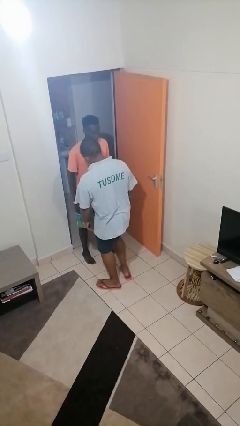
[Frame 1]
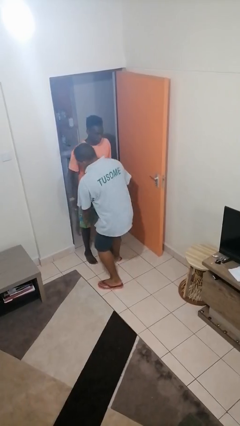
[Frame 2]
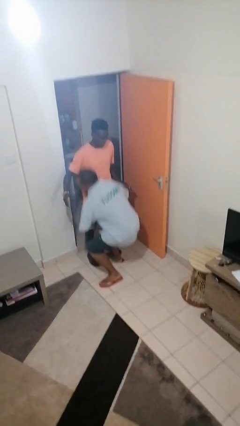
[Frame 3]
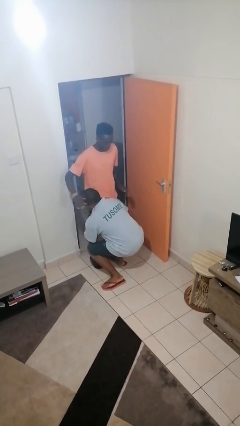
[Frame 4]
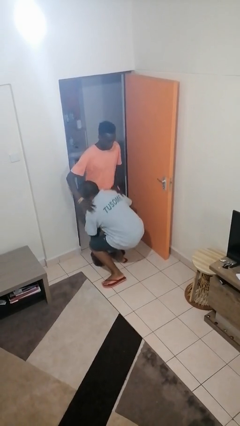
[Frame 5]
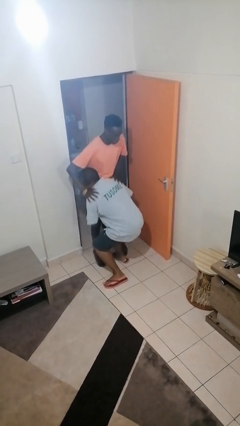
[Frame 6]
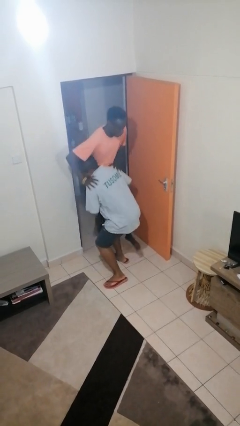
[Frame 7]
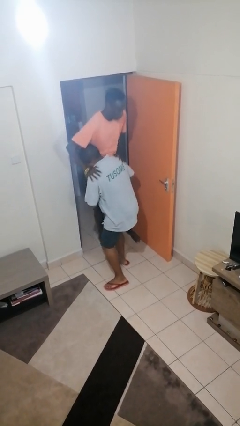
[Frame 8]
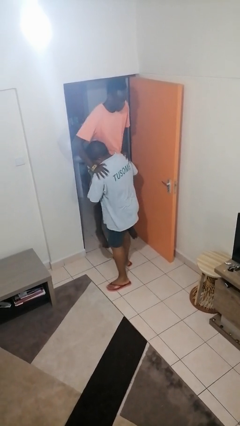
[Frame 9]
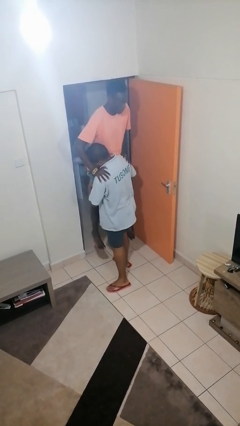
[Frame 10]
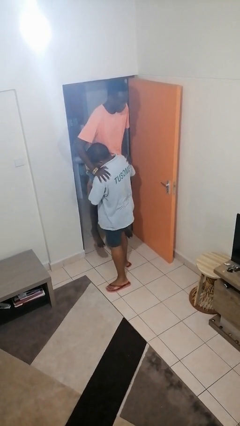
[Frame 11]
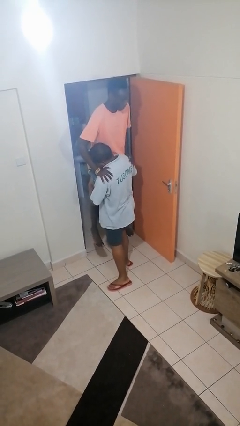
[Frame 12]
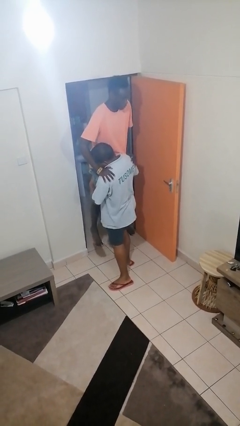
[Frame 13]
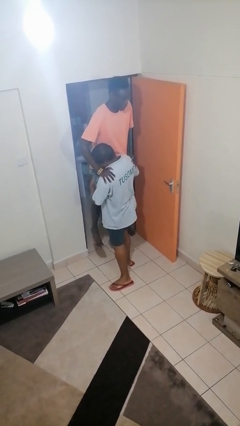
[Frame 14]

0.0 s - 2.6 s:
person carries person over shoulder

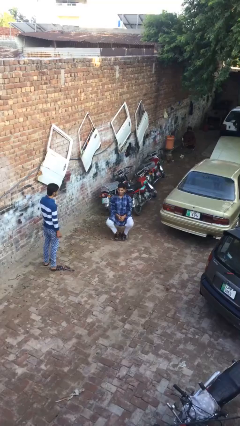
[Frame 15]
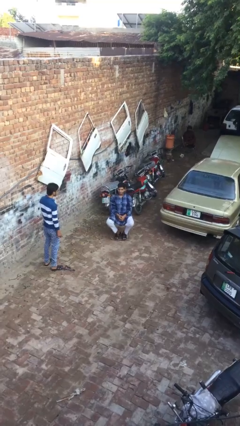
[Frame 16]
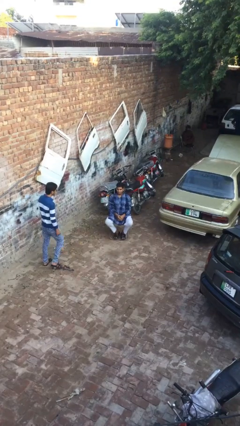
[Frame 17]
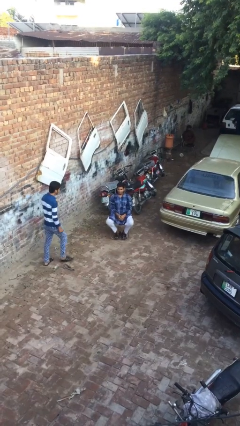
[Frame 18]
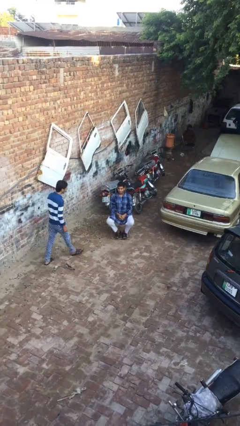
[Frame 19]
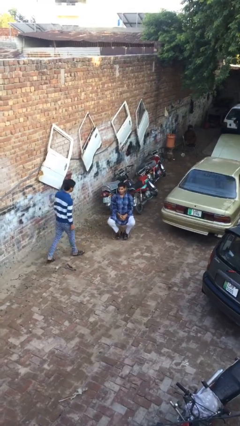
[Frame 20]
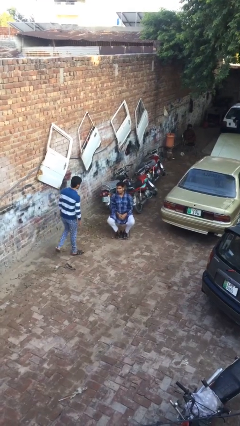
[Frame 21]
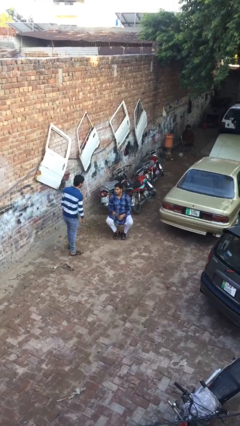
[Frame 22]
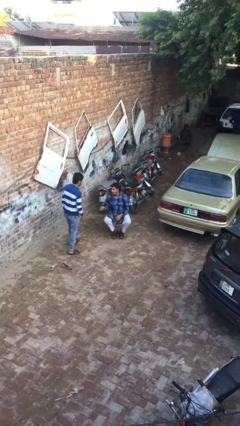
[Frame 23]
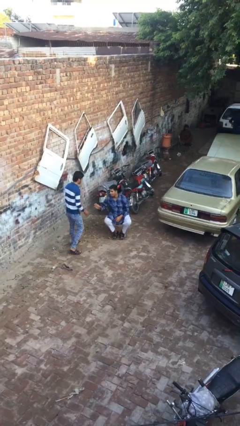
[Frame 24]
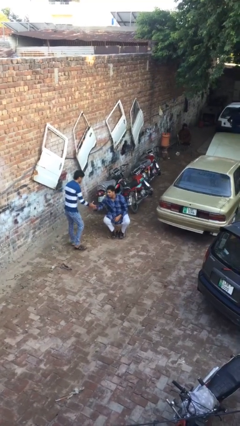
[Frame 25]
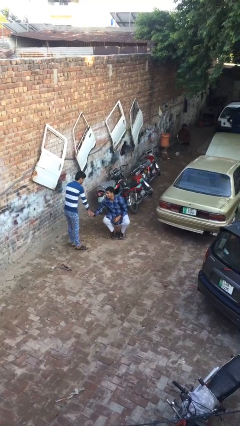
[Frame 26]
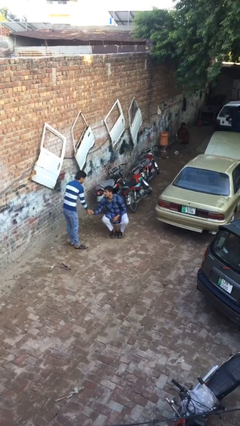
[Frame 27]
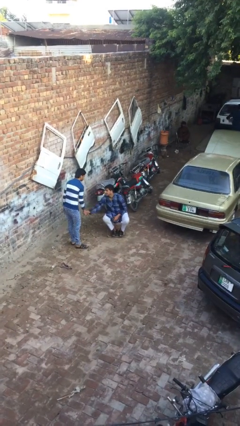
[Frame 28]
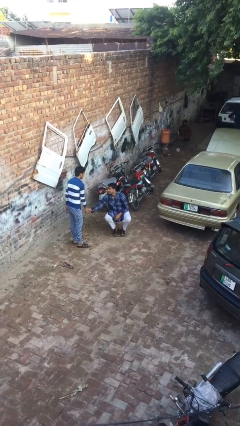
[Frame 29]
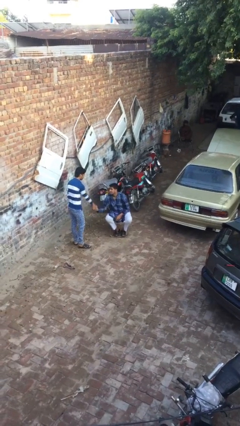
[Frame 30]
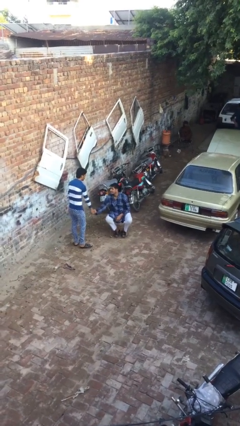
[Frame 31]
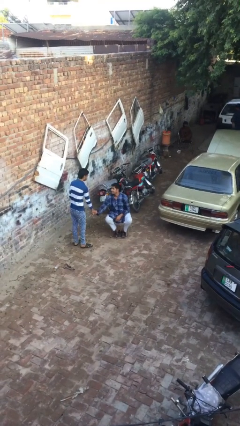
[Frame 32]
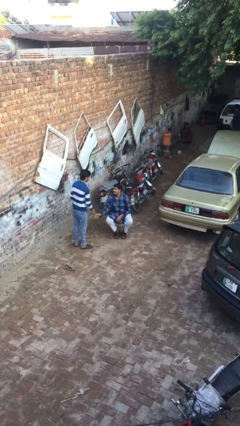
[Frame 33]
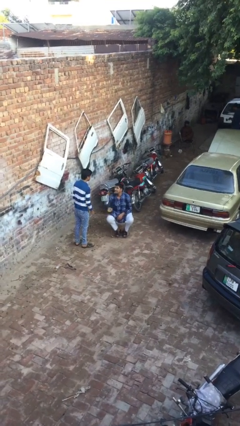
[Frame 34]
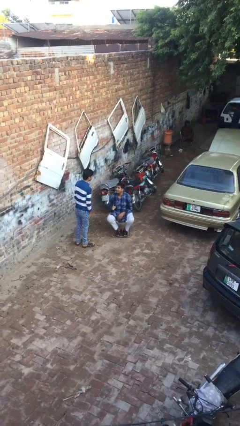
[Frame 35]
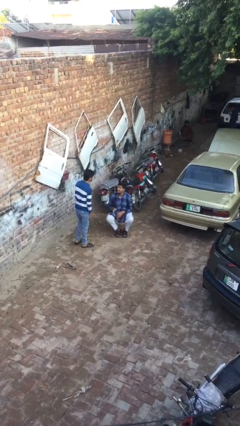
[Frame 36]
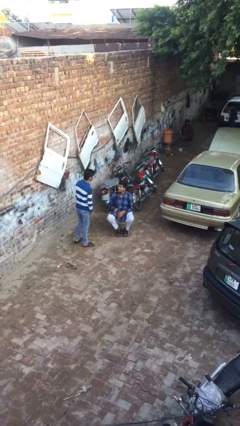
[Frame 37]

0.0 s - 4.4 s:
person shakes hand

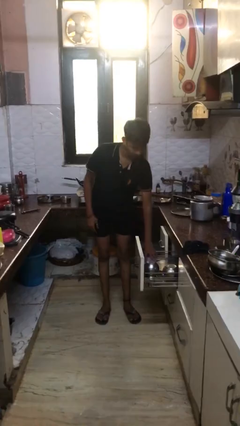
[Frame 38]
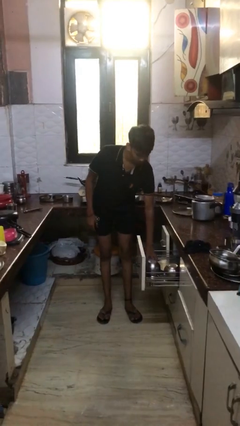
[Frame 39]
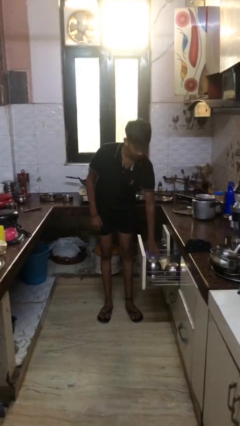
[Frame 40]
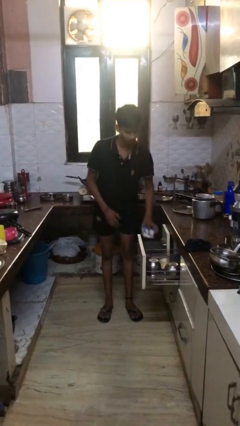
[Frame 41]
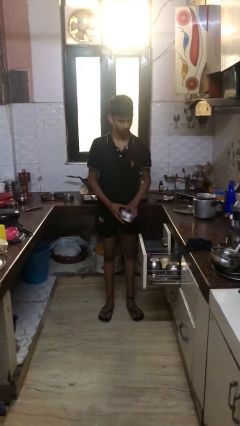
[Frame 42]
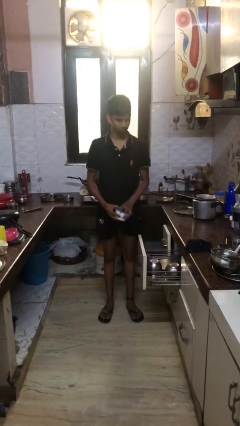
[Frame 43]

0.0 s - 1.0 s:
person takes object from kitchen drawer

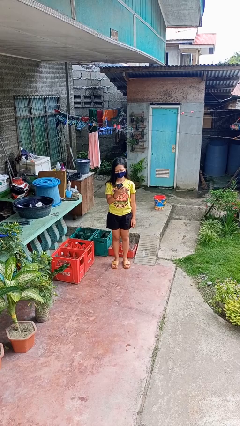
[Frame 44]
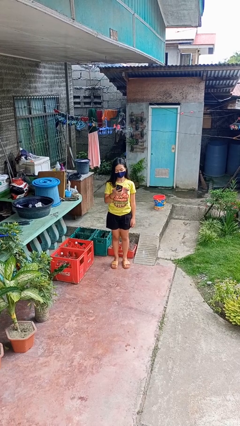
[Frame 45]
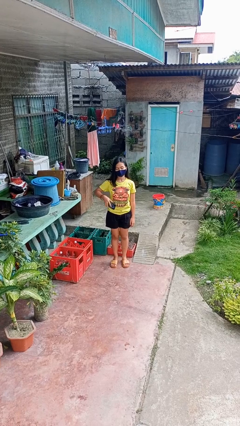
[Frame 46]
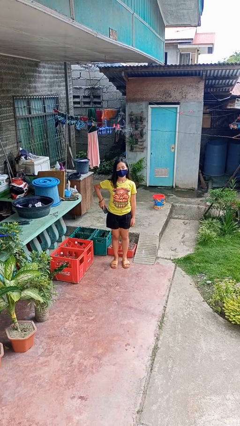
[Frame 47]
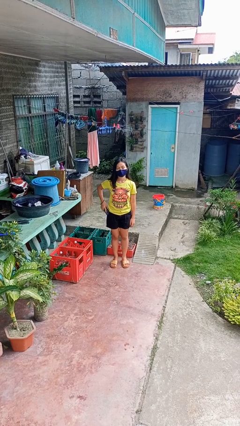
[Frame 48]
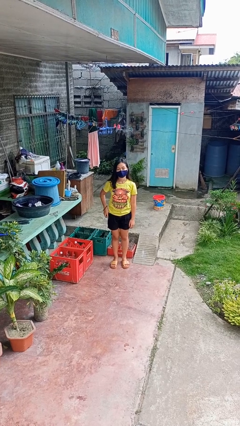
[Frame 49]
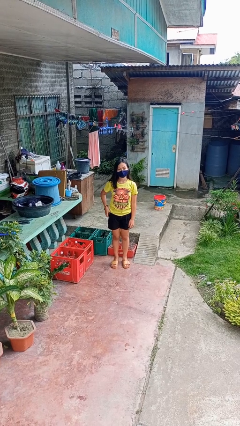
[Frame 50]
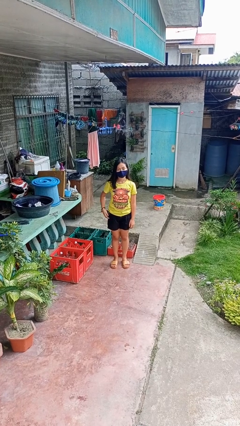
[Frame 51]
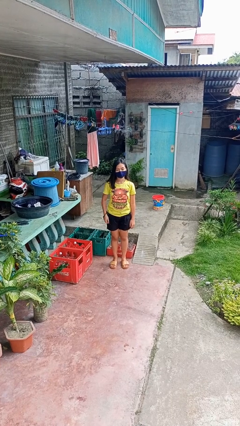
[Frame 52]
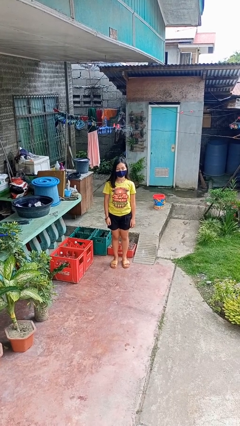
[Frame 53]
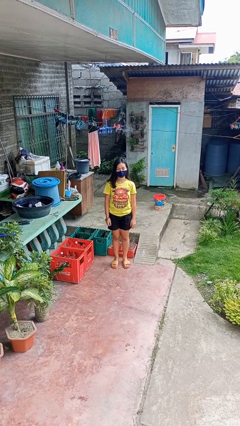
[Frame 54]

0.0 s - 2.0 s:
person puts phone into pocket

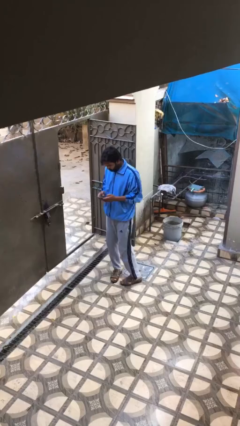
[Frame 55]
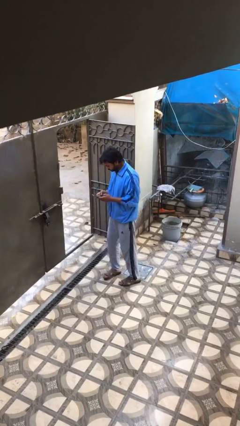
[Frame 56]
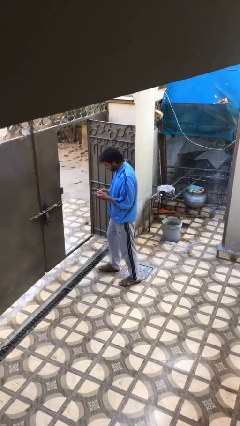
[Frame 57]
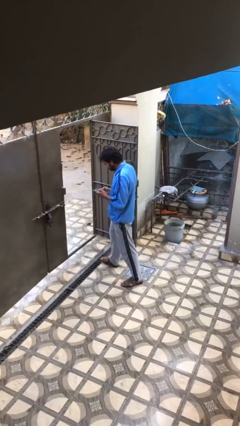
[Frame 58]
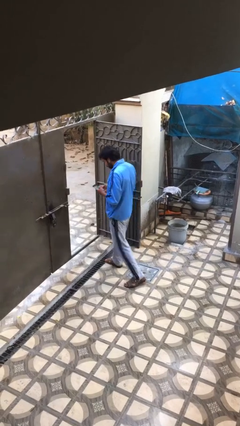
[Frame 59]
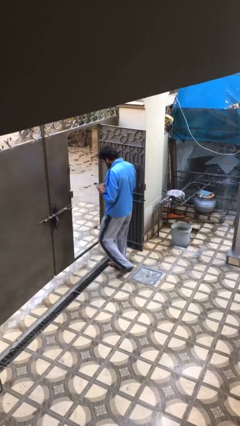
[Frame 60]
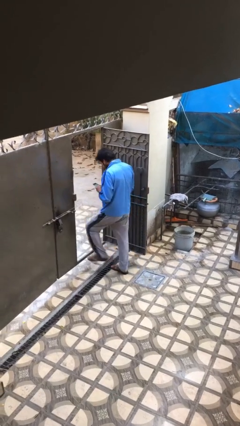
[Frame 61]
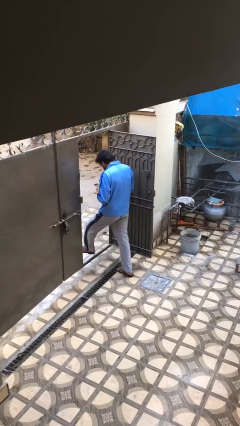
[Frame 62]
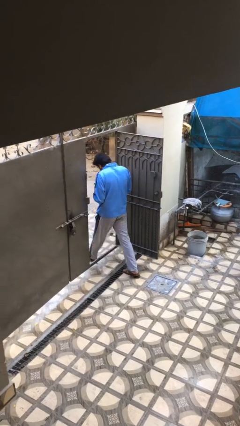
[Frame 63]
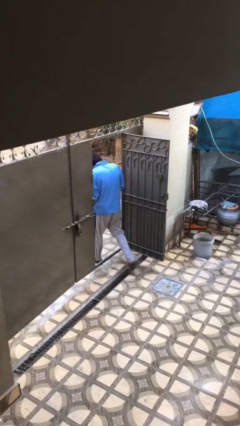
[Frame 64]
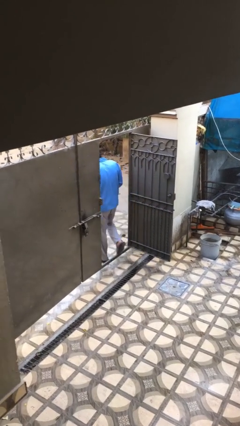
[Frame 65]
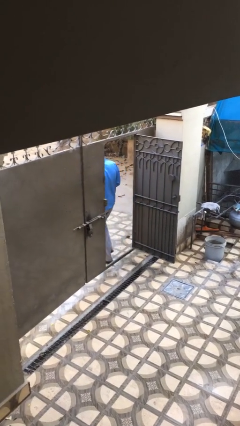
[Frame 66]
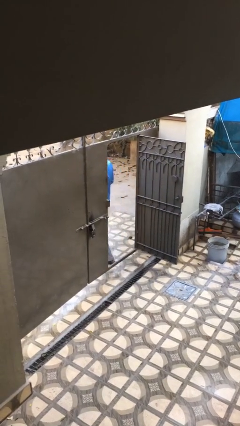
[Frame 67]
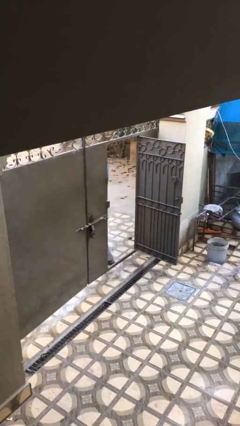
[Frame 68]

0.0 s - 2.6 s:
person exits scene through structure

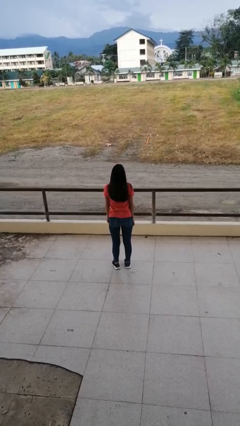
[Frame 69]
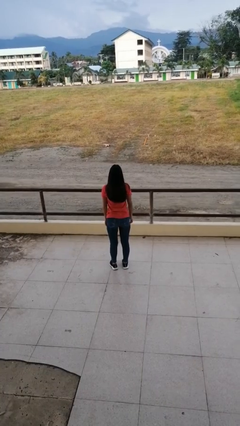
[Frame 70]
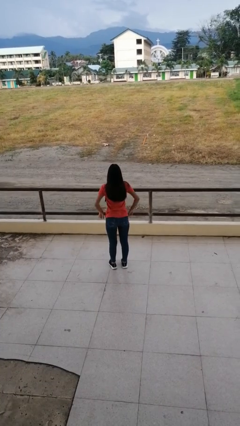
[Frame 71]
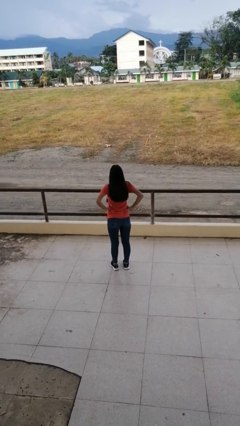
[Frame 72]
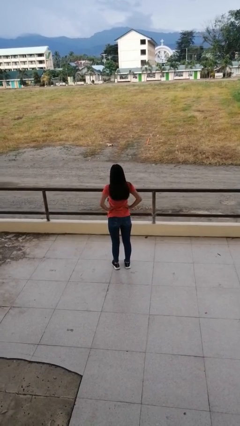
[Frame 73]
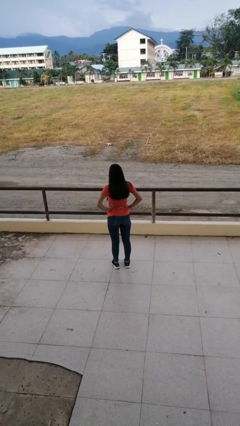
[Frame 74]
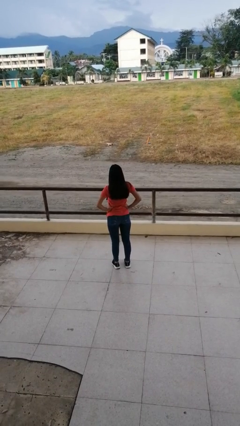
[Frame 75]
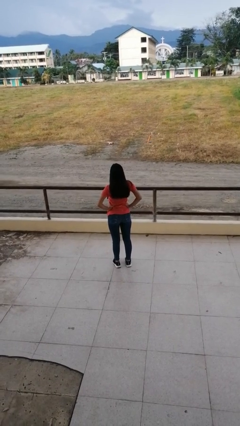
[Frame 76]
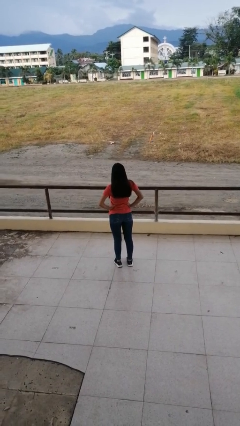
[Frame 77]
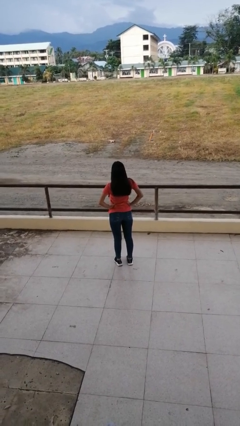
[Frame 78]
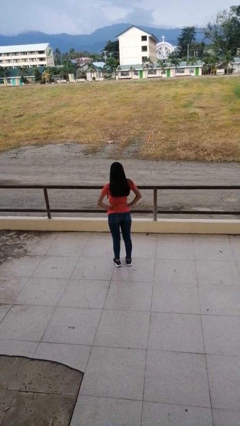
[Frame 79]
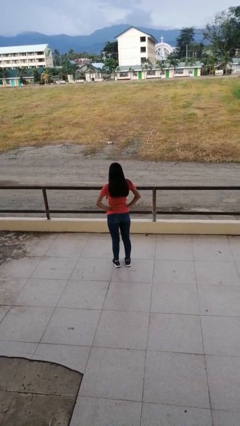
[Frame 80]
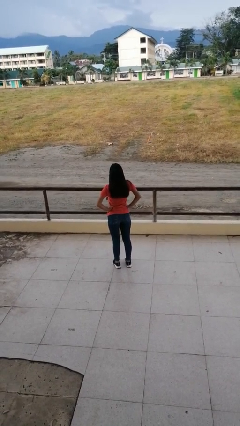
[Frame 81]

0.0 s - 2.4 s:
person stretches back

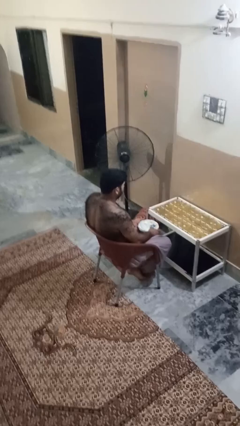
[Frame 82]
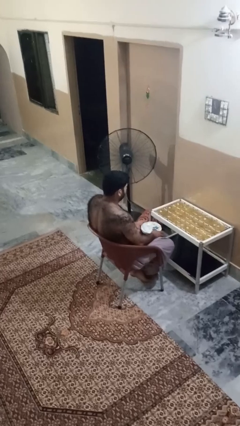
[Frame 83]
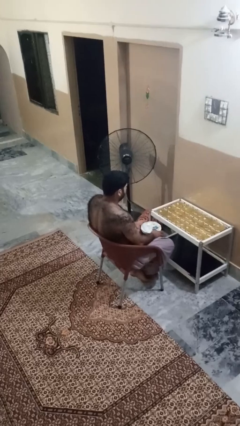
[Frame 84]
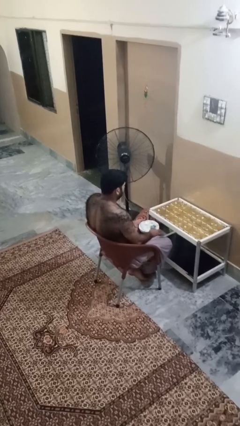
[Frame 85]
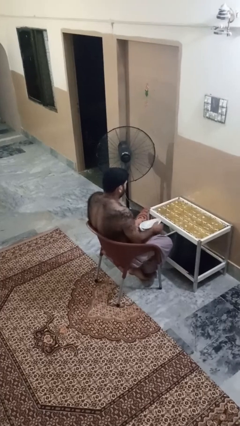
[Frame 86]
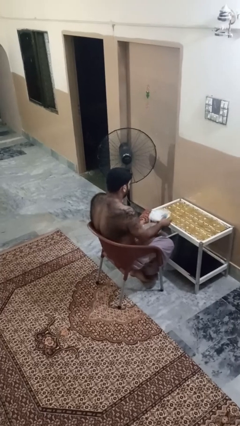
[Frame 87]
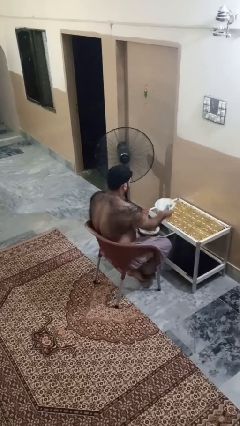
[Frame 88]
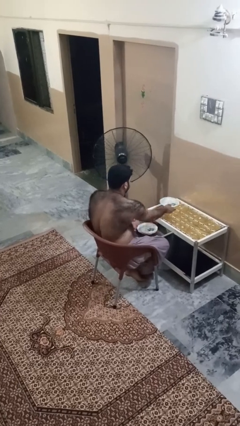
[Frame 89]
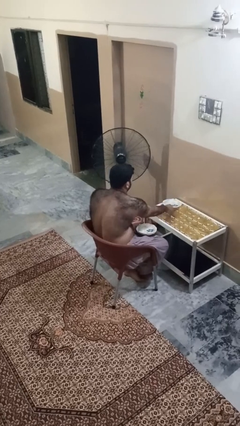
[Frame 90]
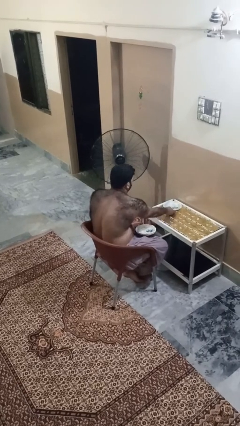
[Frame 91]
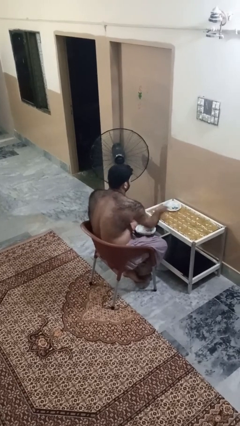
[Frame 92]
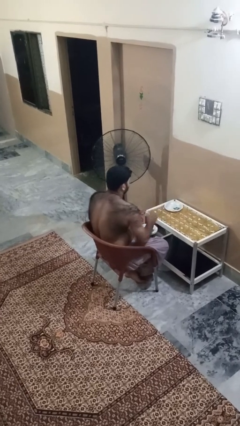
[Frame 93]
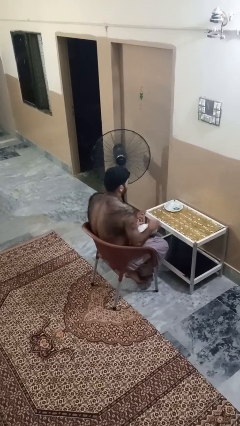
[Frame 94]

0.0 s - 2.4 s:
person sets table
